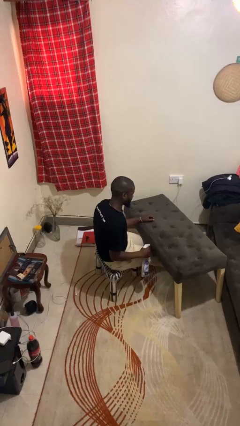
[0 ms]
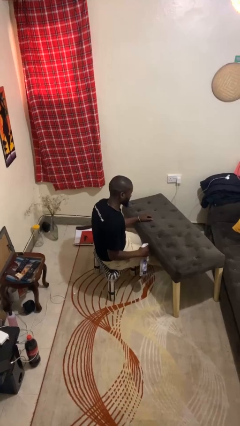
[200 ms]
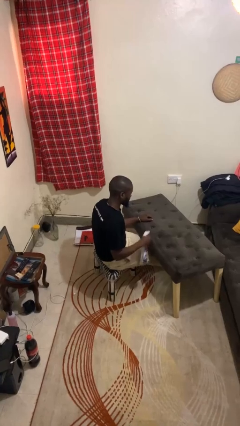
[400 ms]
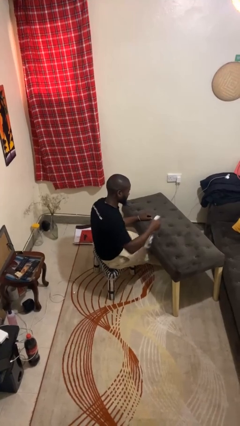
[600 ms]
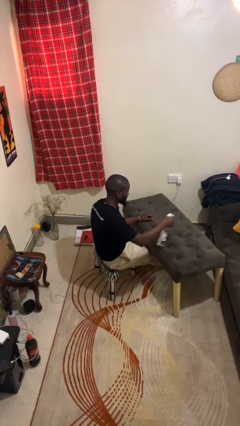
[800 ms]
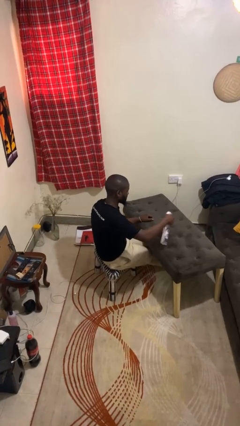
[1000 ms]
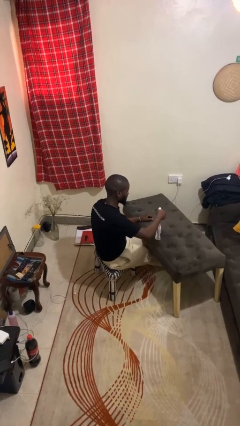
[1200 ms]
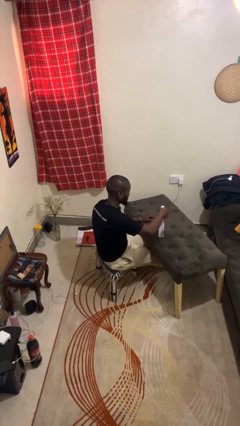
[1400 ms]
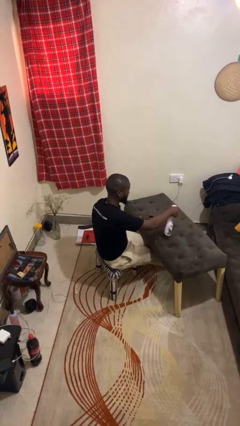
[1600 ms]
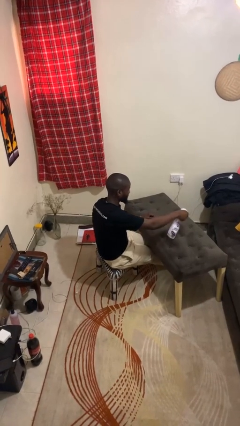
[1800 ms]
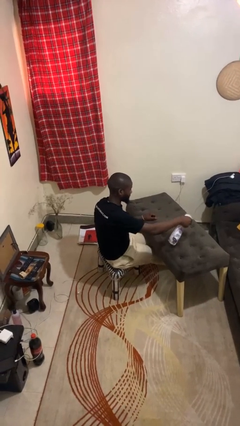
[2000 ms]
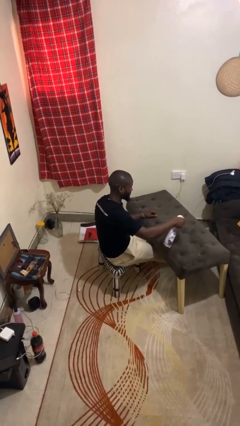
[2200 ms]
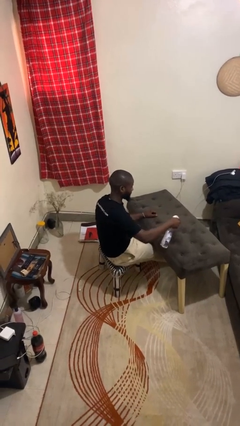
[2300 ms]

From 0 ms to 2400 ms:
person sprays from bottle

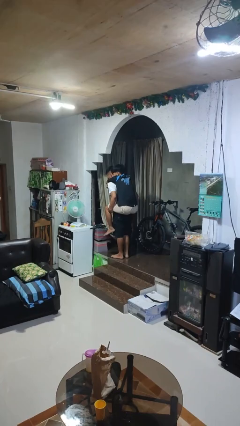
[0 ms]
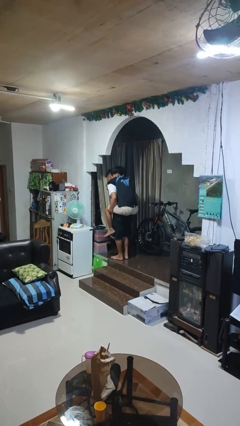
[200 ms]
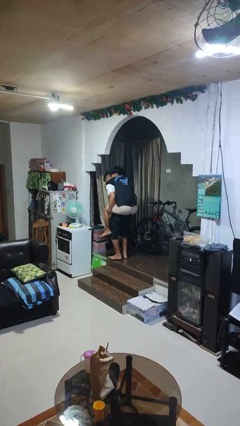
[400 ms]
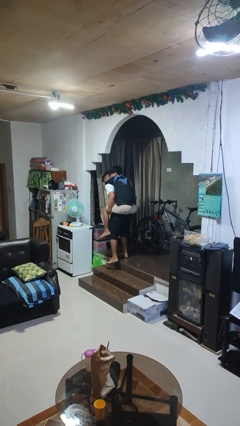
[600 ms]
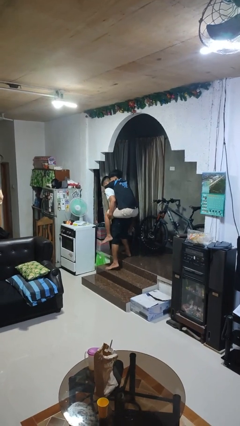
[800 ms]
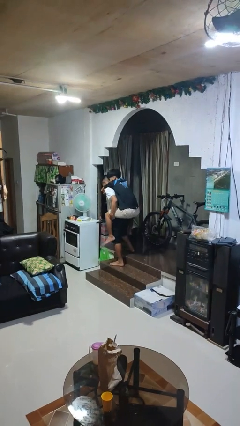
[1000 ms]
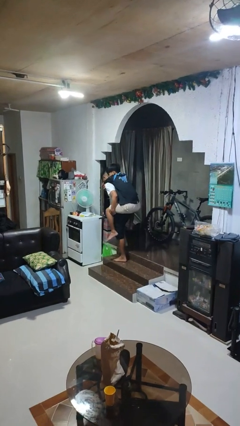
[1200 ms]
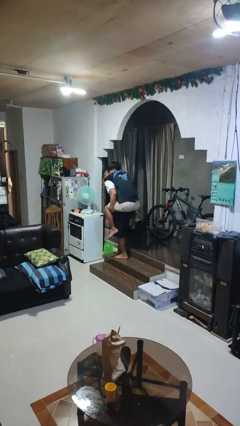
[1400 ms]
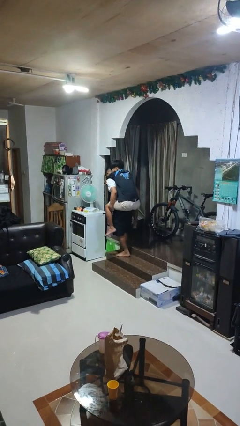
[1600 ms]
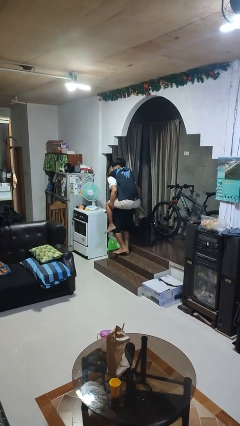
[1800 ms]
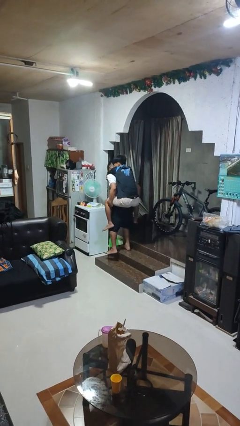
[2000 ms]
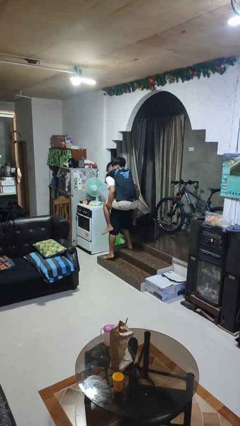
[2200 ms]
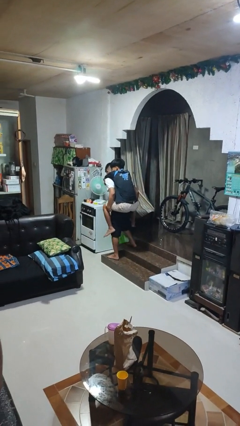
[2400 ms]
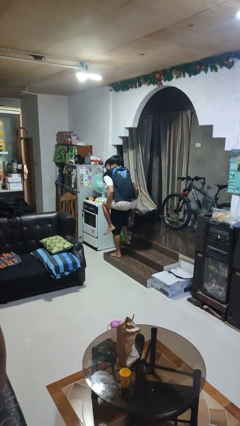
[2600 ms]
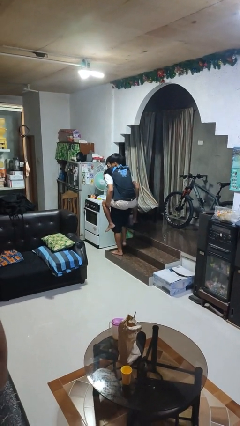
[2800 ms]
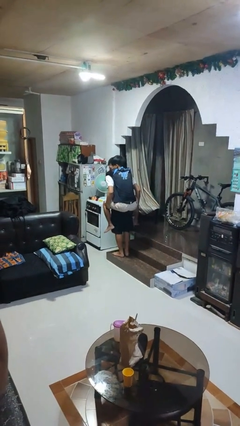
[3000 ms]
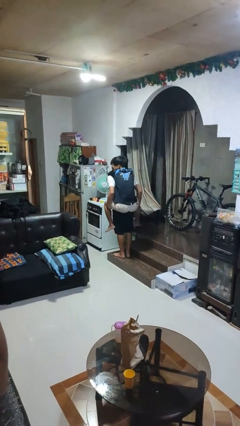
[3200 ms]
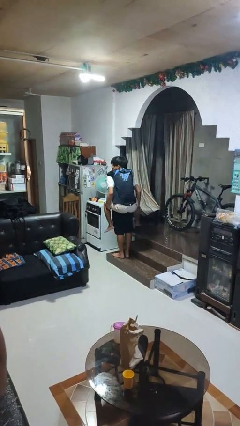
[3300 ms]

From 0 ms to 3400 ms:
person carries person on back

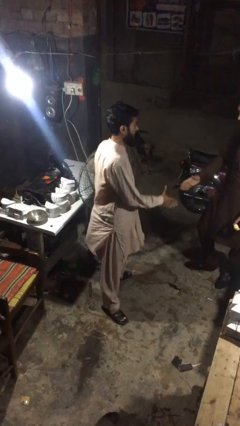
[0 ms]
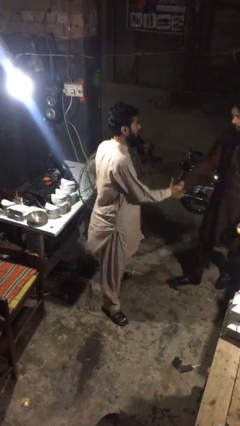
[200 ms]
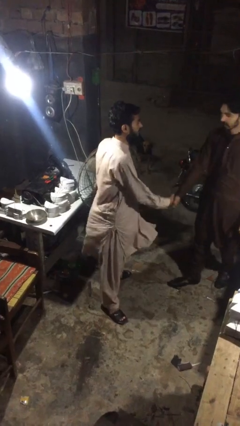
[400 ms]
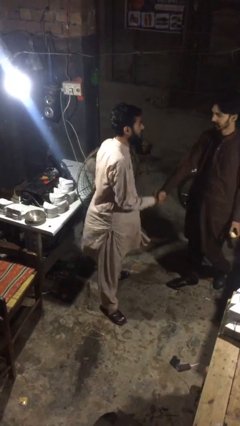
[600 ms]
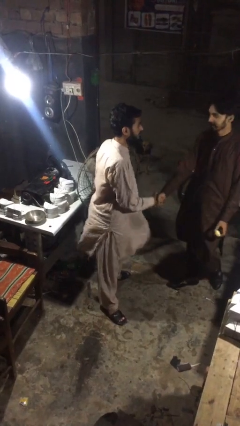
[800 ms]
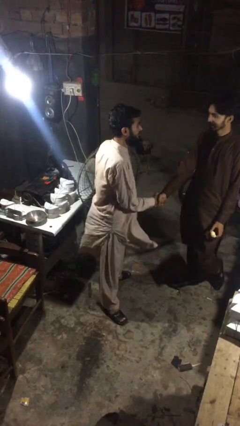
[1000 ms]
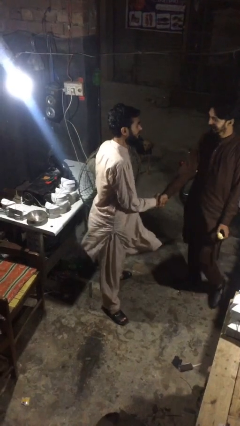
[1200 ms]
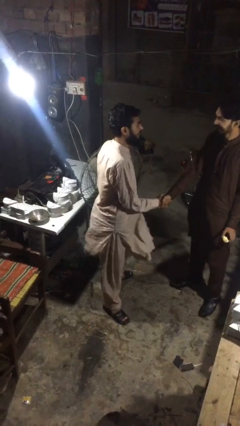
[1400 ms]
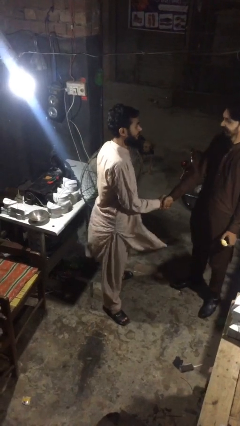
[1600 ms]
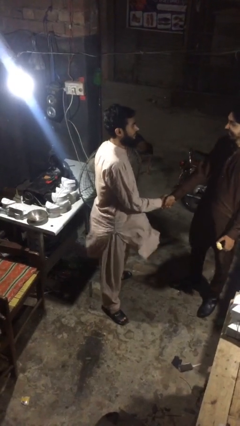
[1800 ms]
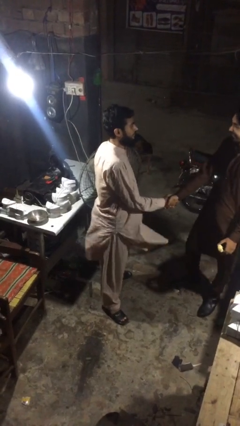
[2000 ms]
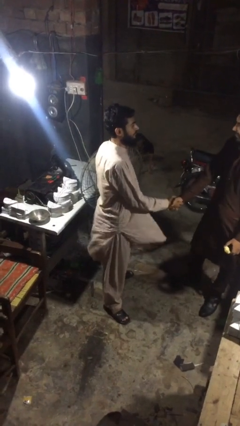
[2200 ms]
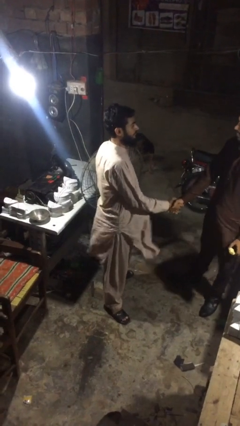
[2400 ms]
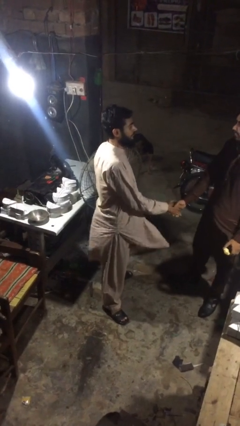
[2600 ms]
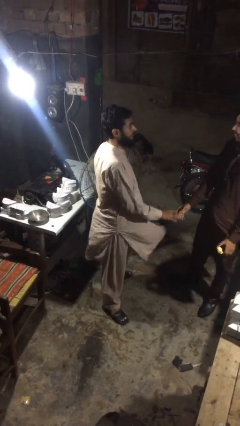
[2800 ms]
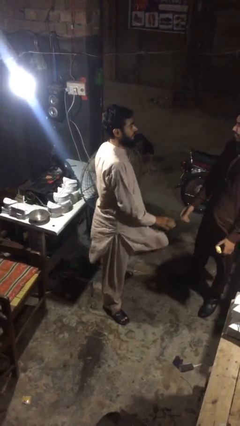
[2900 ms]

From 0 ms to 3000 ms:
person shakes hand

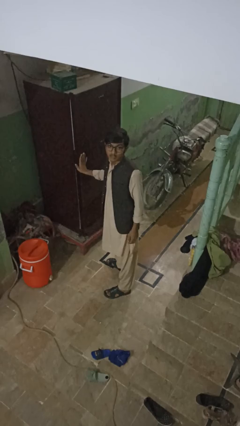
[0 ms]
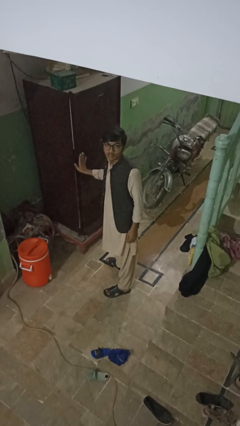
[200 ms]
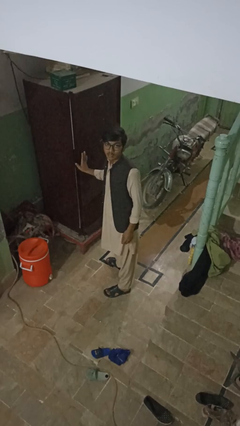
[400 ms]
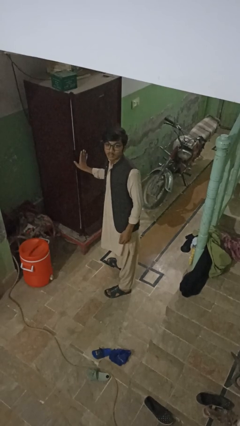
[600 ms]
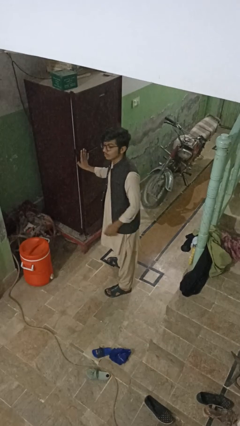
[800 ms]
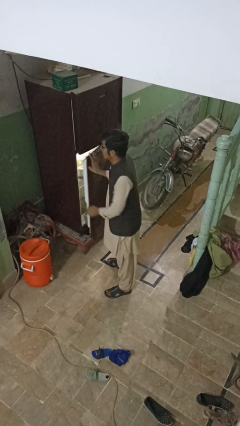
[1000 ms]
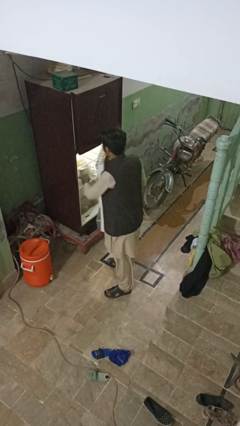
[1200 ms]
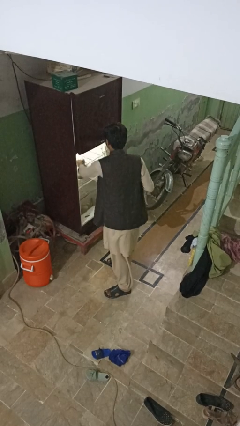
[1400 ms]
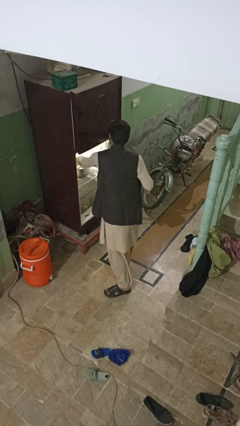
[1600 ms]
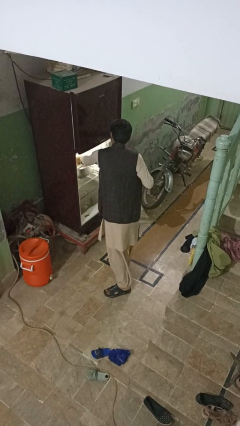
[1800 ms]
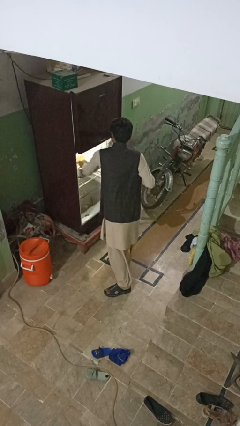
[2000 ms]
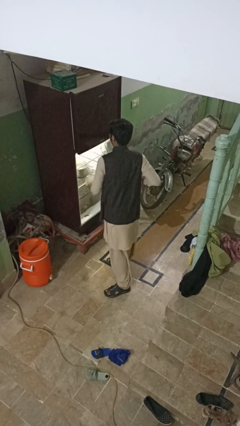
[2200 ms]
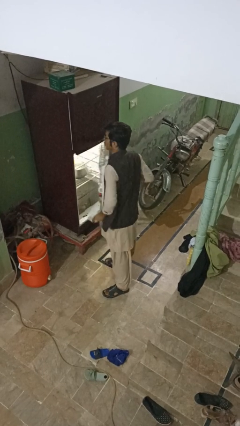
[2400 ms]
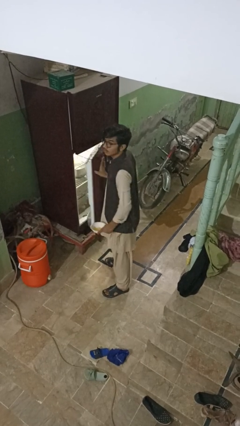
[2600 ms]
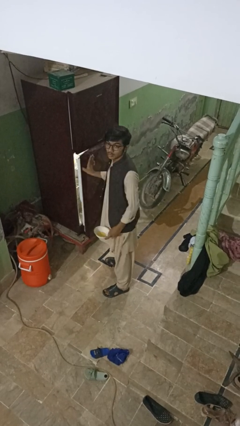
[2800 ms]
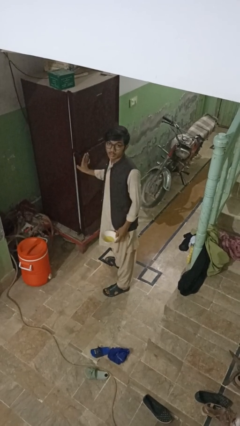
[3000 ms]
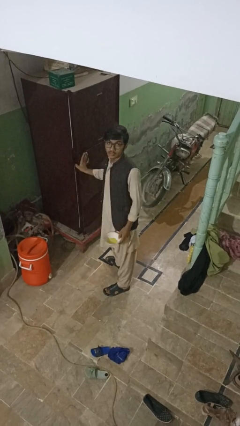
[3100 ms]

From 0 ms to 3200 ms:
person takes object from refrigerator

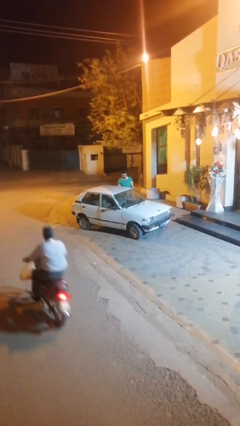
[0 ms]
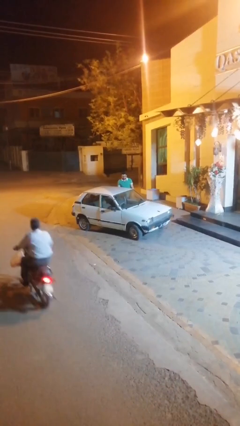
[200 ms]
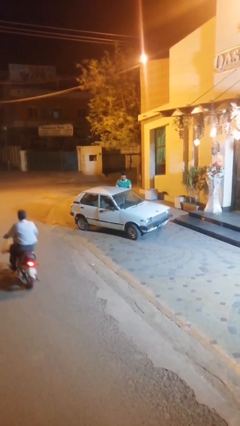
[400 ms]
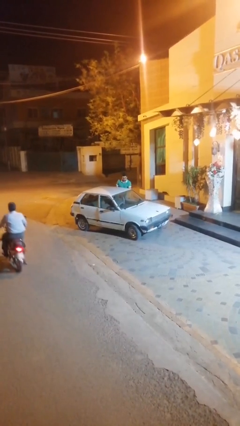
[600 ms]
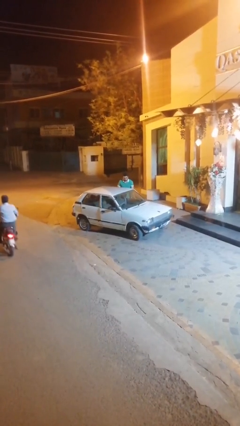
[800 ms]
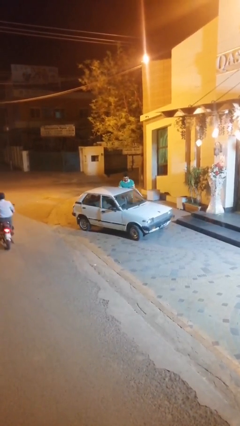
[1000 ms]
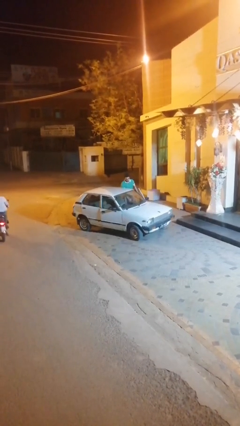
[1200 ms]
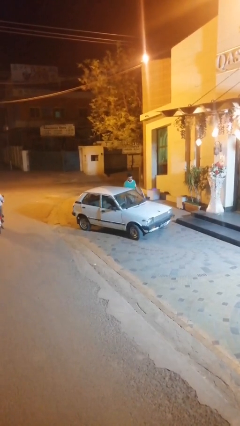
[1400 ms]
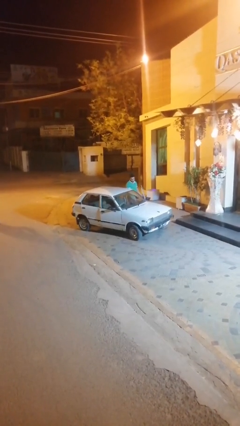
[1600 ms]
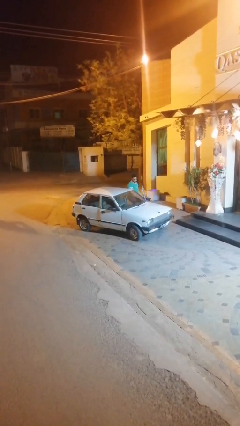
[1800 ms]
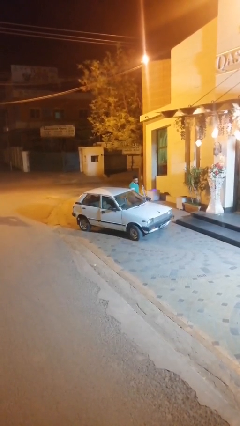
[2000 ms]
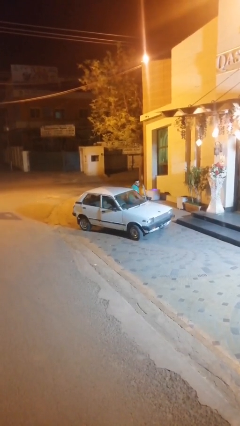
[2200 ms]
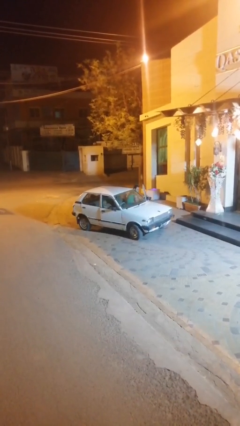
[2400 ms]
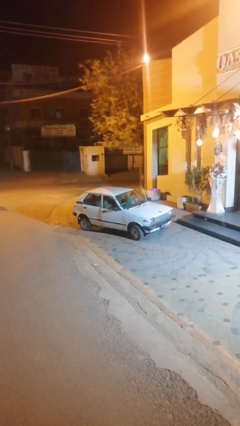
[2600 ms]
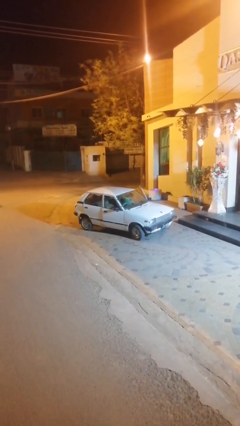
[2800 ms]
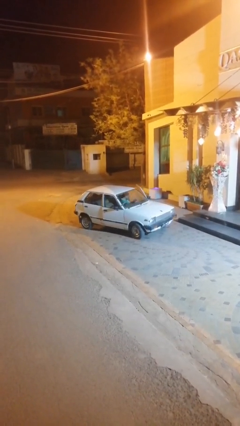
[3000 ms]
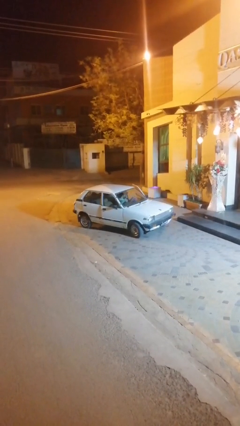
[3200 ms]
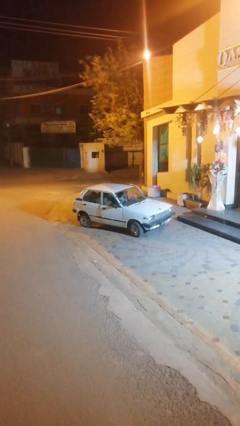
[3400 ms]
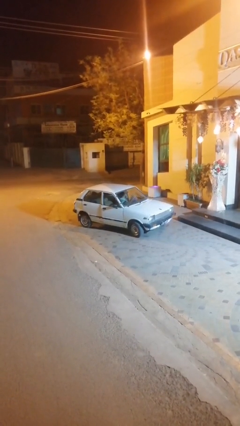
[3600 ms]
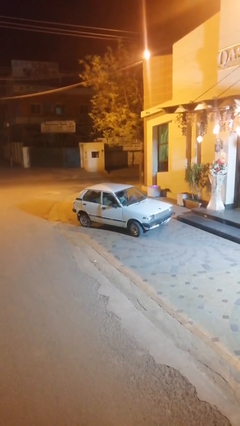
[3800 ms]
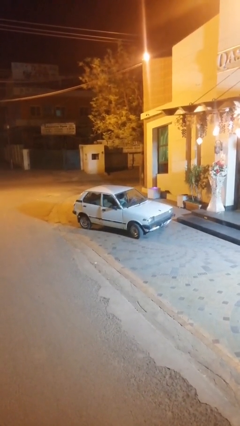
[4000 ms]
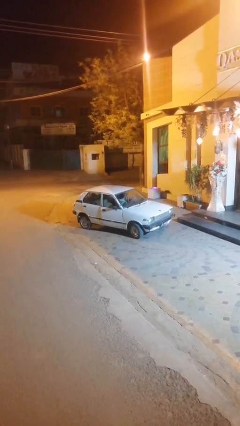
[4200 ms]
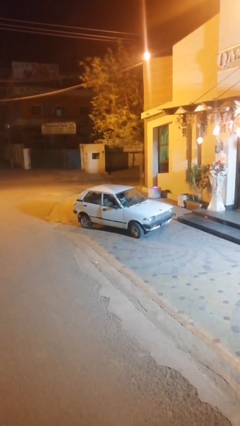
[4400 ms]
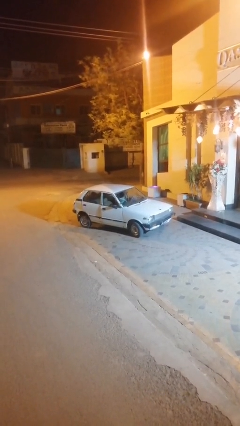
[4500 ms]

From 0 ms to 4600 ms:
car picks up person

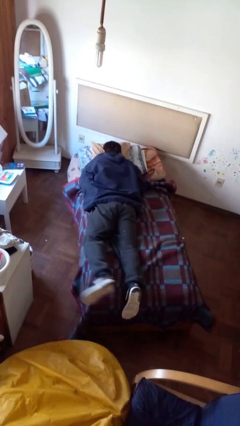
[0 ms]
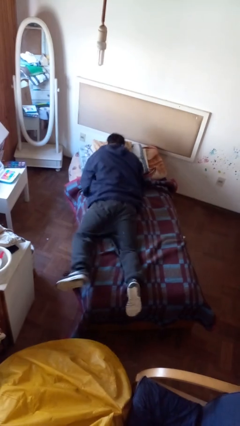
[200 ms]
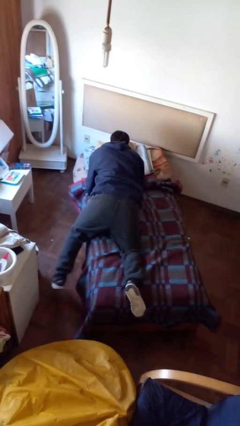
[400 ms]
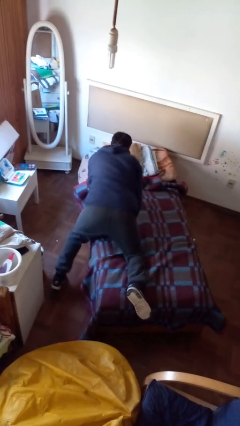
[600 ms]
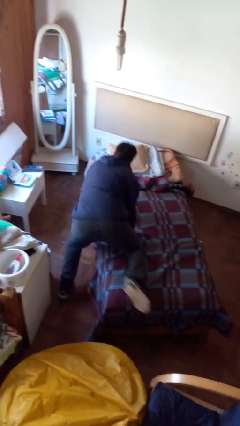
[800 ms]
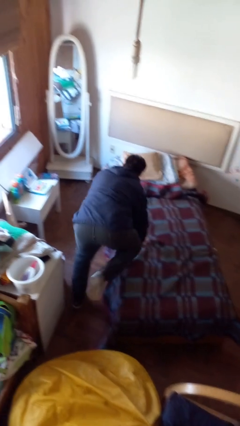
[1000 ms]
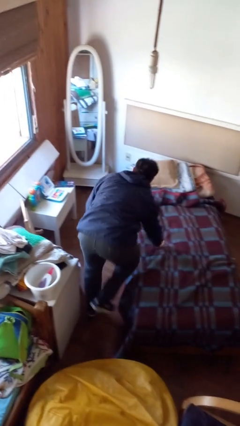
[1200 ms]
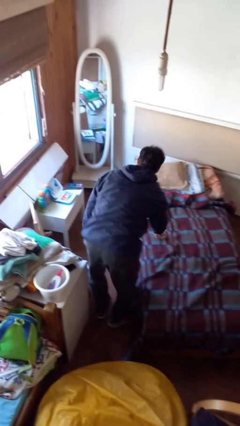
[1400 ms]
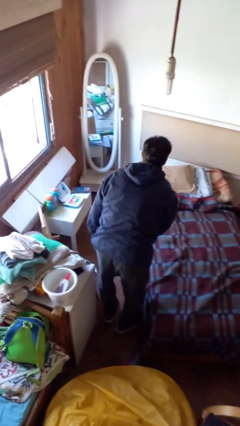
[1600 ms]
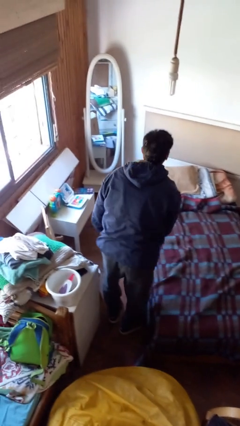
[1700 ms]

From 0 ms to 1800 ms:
person stands up
